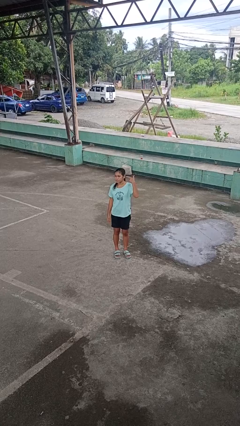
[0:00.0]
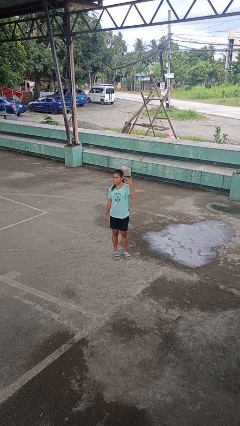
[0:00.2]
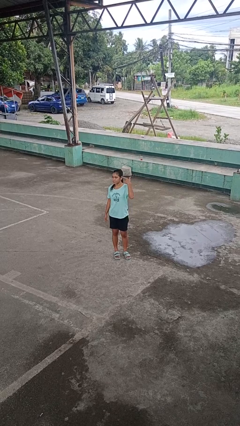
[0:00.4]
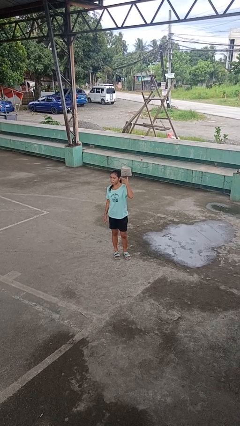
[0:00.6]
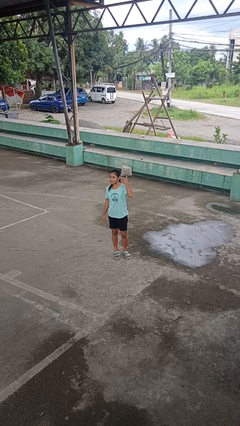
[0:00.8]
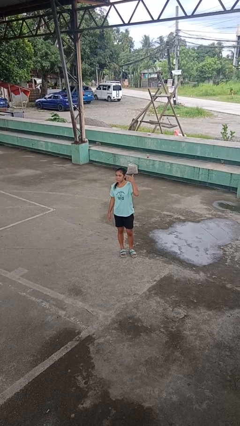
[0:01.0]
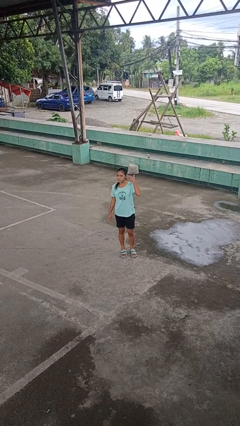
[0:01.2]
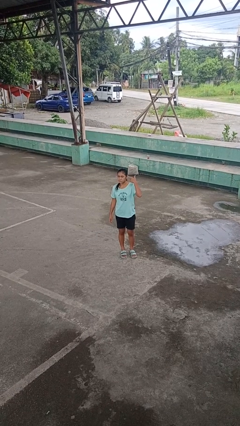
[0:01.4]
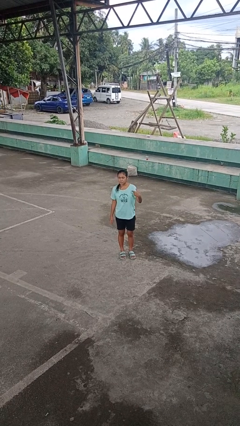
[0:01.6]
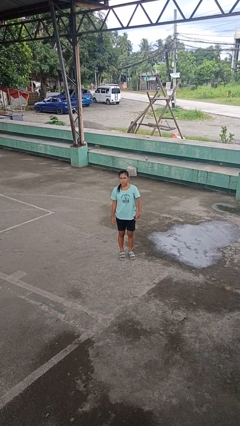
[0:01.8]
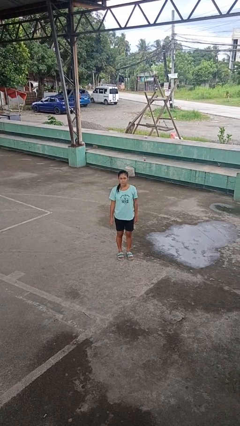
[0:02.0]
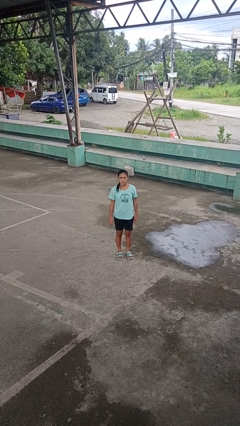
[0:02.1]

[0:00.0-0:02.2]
person gestures listen closely

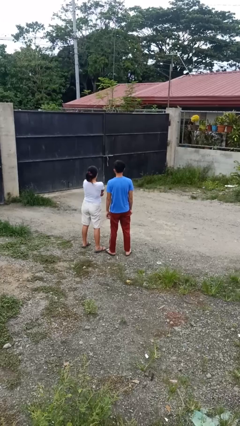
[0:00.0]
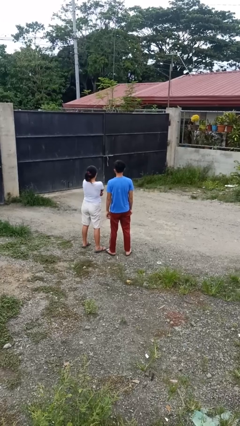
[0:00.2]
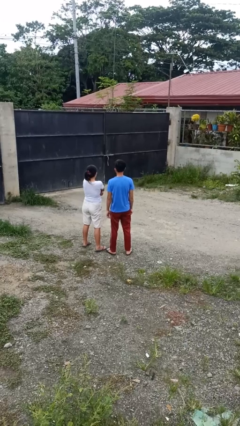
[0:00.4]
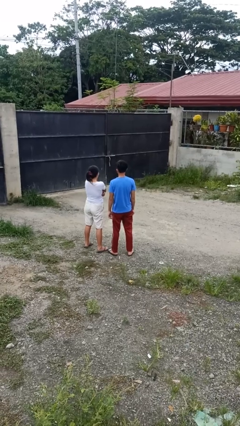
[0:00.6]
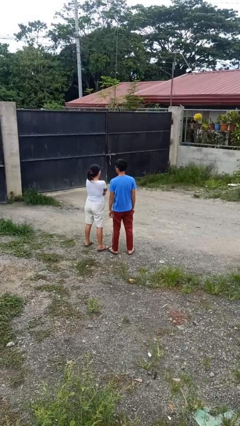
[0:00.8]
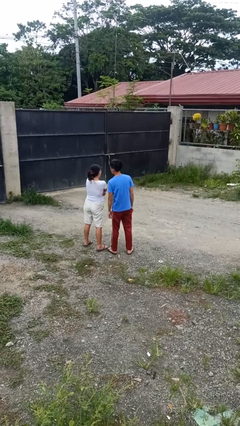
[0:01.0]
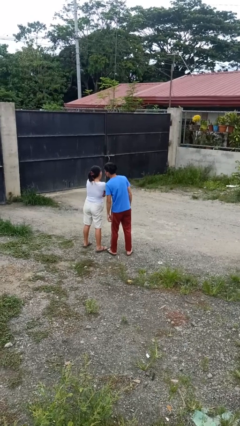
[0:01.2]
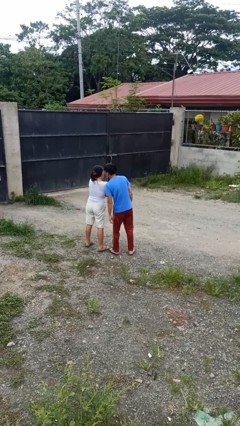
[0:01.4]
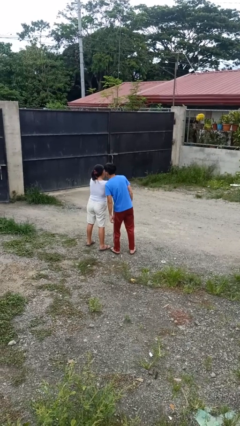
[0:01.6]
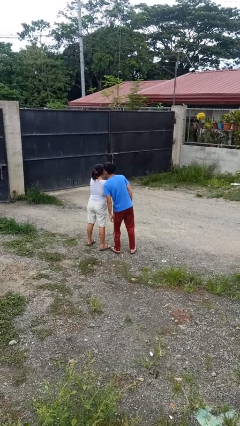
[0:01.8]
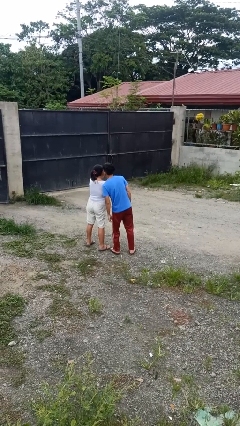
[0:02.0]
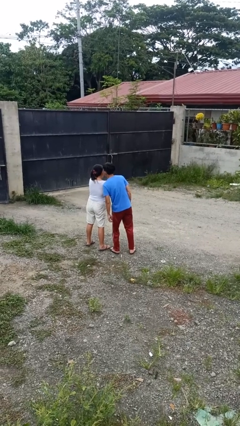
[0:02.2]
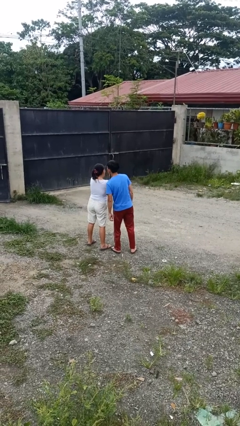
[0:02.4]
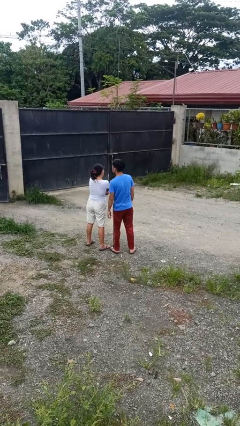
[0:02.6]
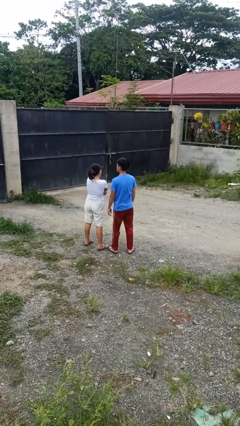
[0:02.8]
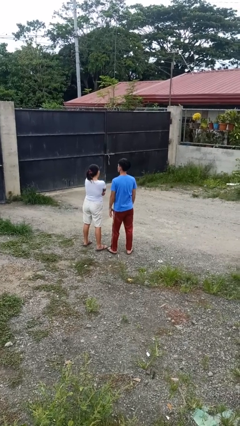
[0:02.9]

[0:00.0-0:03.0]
person kisses cheek of person

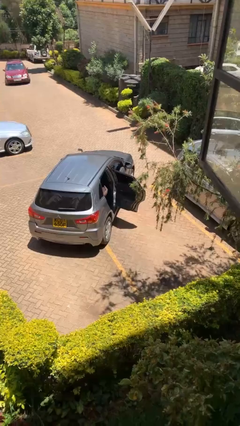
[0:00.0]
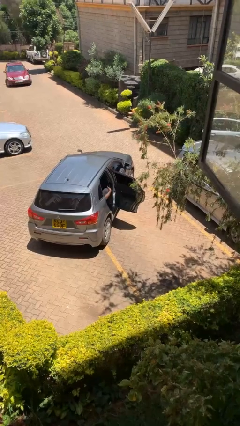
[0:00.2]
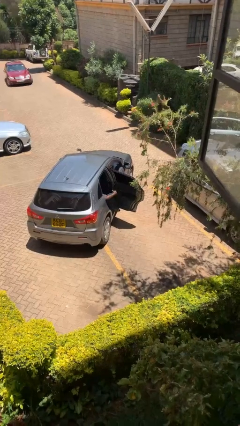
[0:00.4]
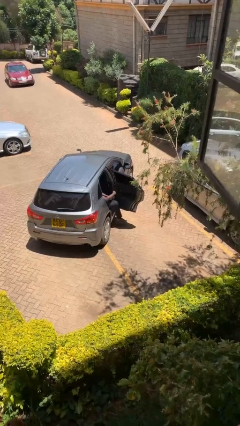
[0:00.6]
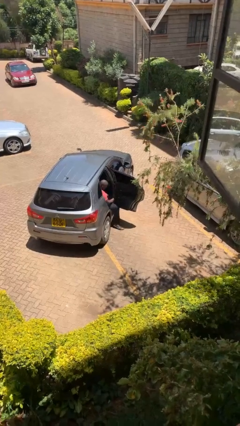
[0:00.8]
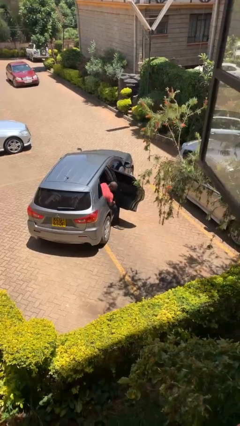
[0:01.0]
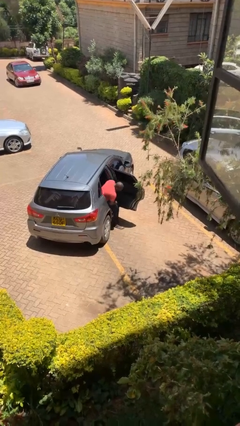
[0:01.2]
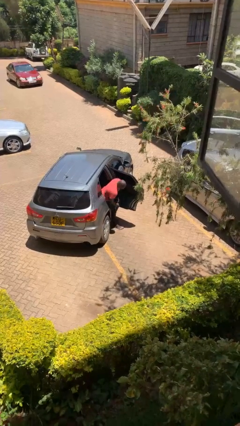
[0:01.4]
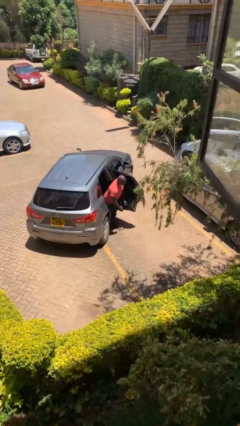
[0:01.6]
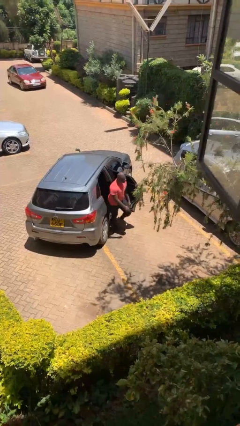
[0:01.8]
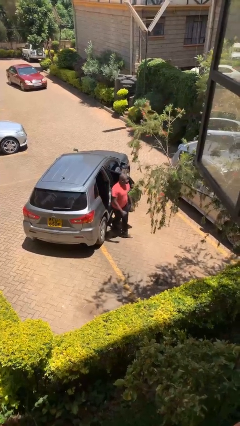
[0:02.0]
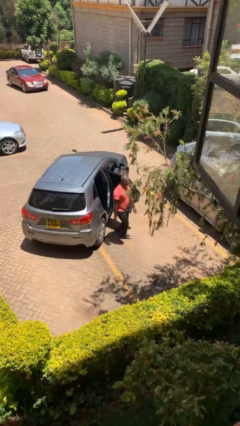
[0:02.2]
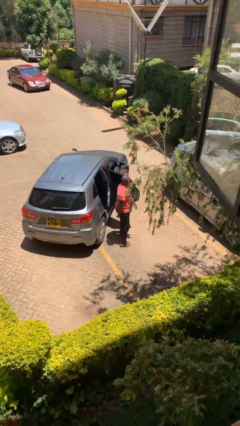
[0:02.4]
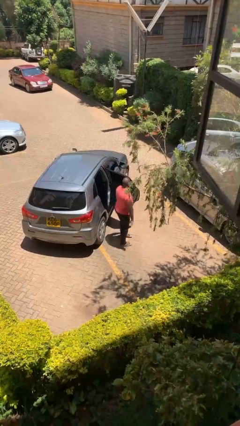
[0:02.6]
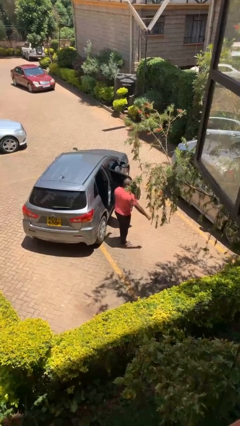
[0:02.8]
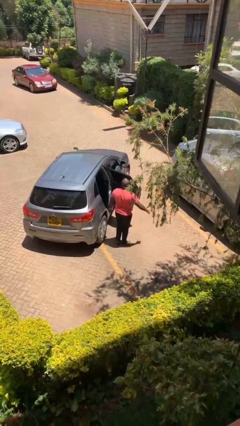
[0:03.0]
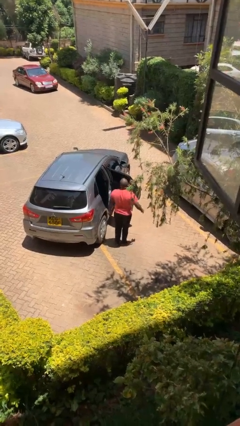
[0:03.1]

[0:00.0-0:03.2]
person exits car

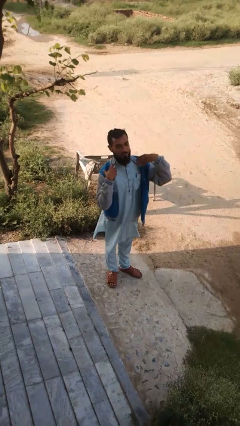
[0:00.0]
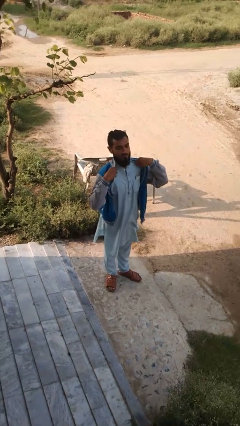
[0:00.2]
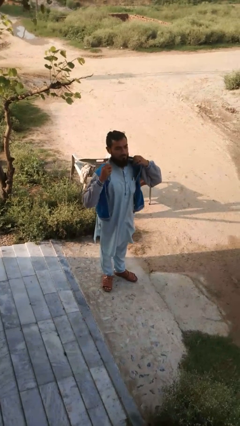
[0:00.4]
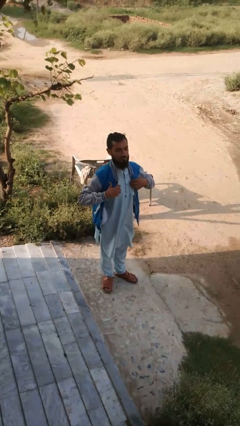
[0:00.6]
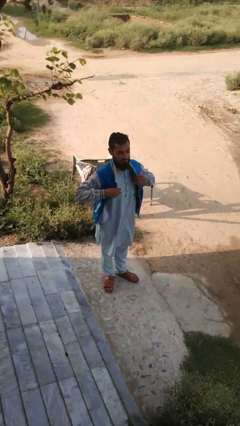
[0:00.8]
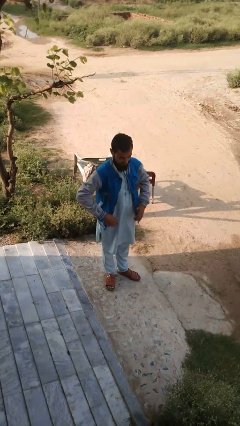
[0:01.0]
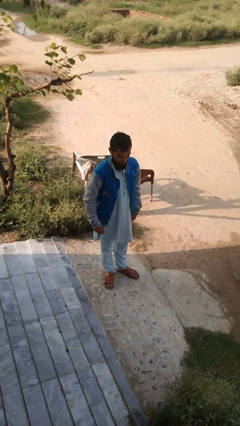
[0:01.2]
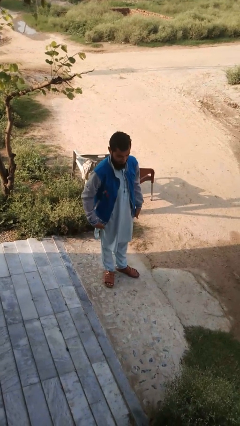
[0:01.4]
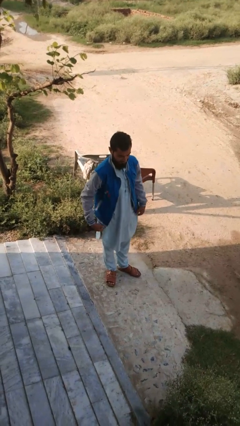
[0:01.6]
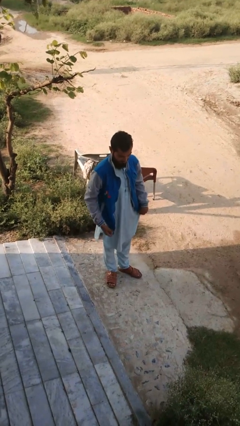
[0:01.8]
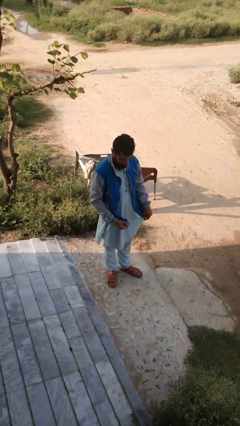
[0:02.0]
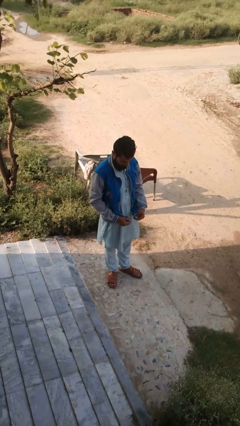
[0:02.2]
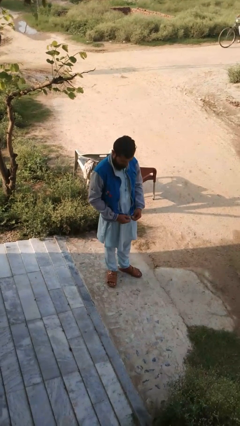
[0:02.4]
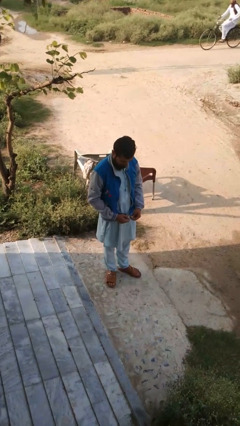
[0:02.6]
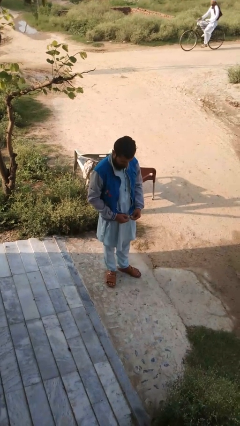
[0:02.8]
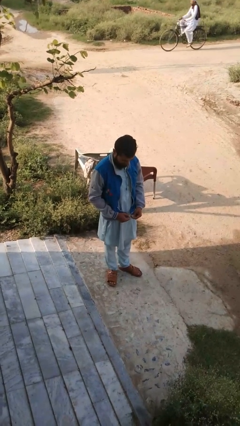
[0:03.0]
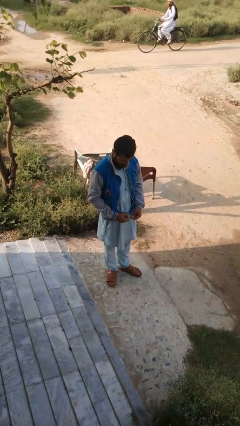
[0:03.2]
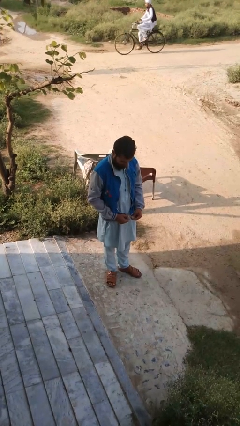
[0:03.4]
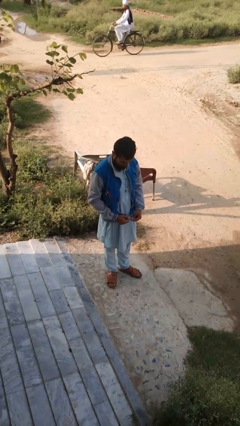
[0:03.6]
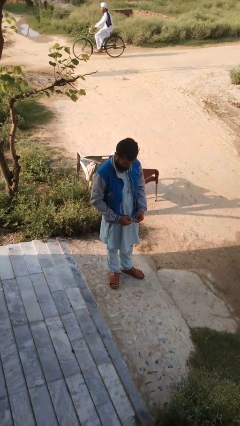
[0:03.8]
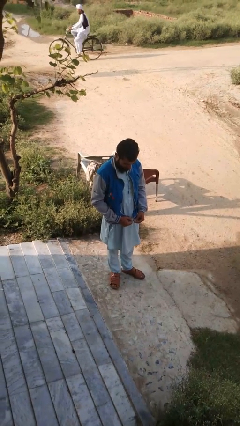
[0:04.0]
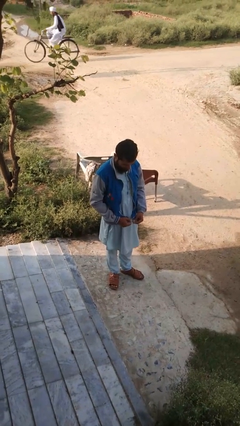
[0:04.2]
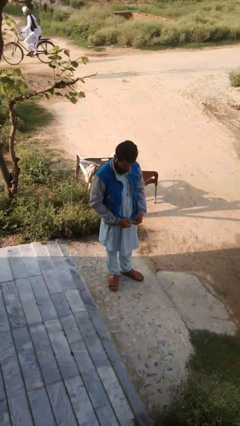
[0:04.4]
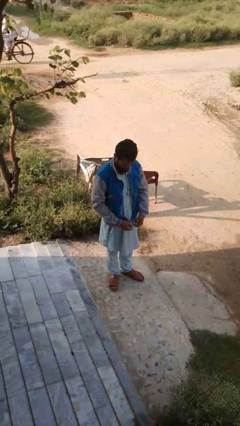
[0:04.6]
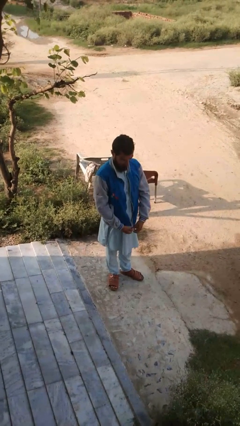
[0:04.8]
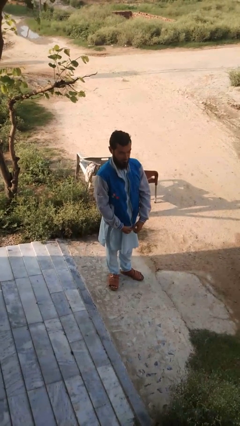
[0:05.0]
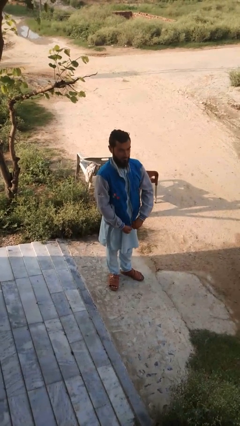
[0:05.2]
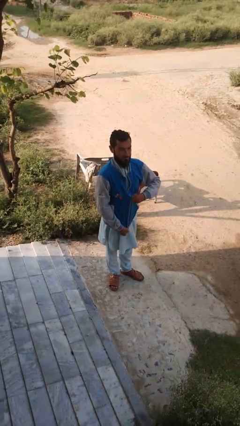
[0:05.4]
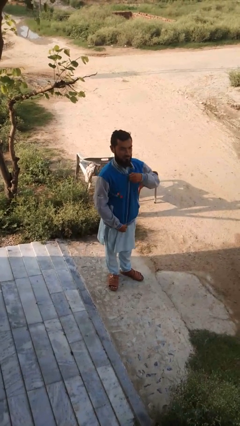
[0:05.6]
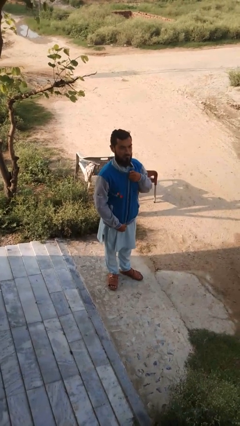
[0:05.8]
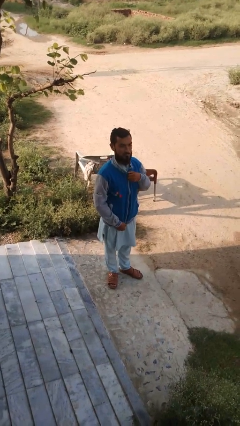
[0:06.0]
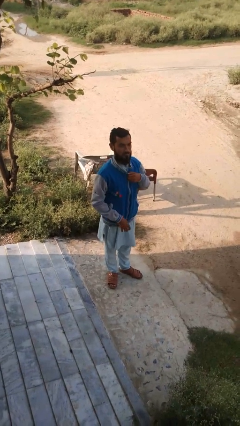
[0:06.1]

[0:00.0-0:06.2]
person zips up jacket

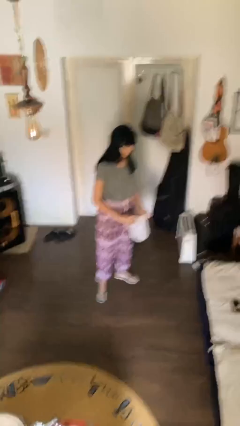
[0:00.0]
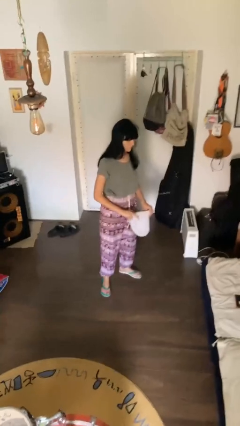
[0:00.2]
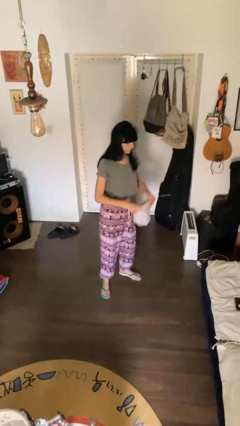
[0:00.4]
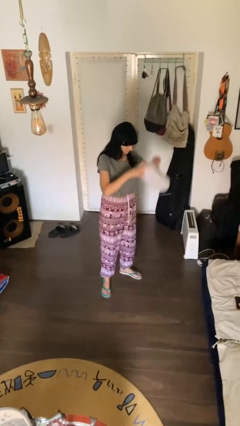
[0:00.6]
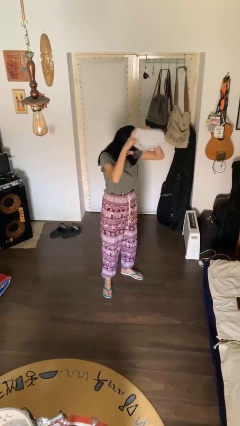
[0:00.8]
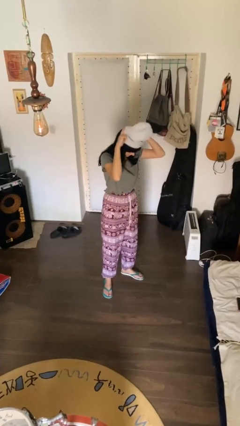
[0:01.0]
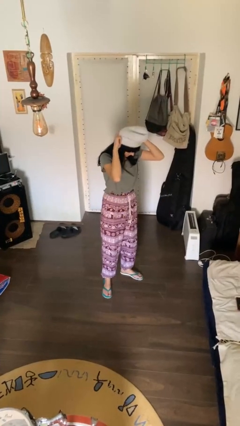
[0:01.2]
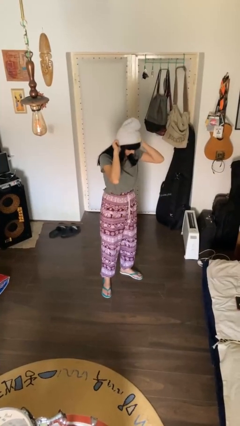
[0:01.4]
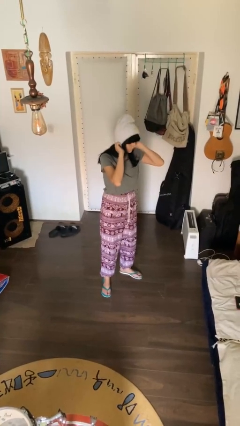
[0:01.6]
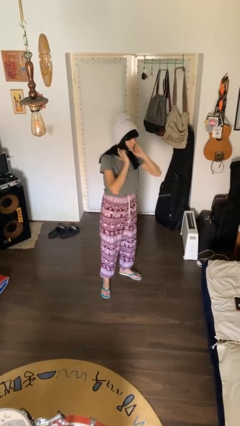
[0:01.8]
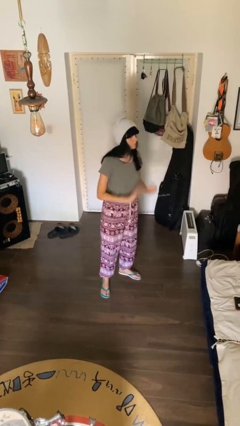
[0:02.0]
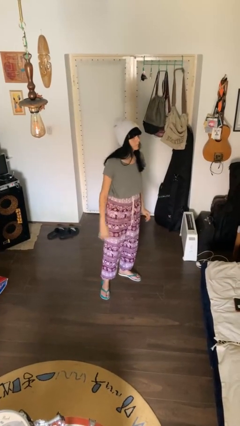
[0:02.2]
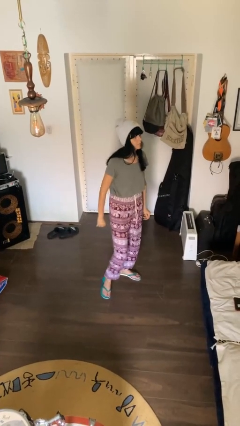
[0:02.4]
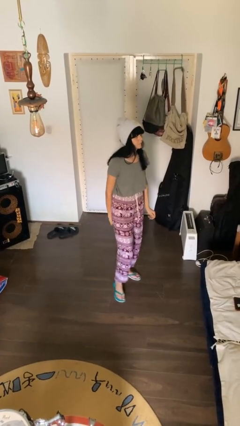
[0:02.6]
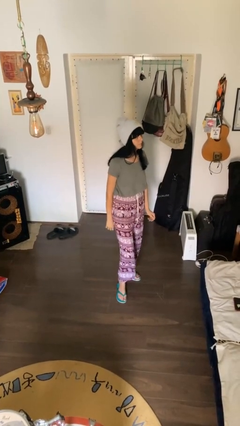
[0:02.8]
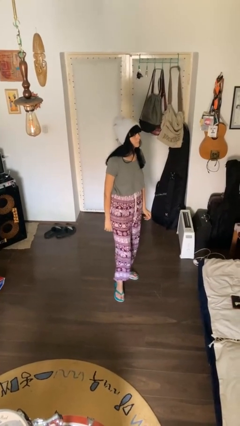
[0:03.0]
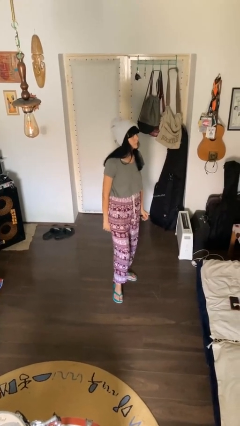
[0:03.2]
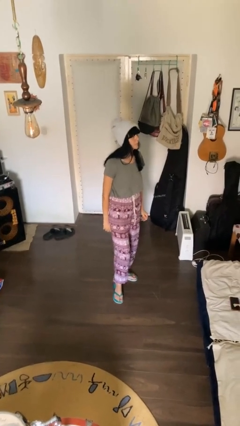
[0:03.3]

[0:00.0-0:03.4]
person puts on hat
